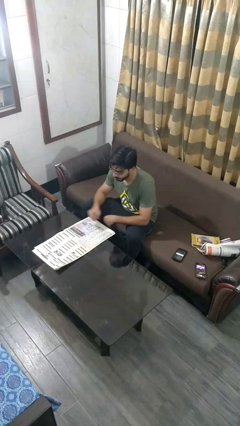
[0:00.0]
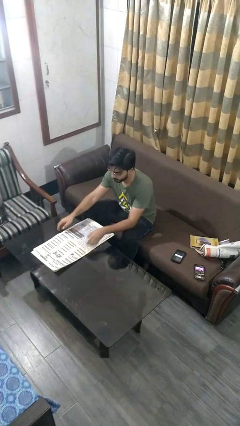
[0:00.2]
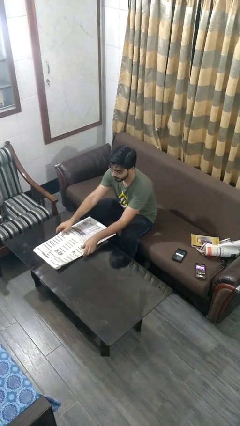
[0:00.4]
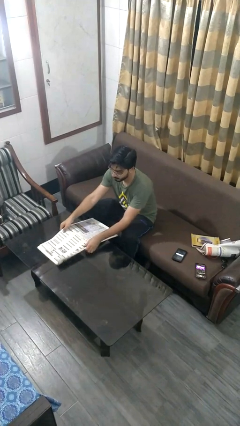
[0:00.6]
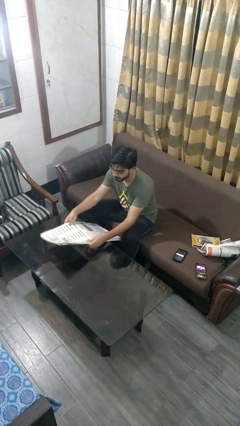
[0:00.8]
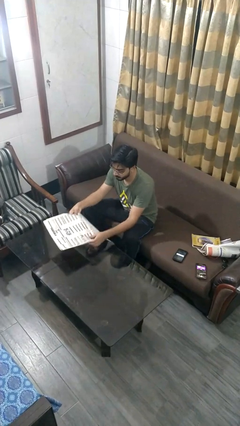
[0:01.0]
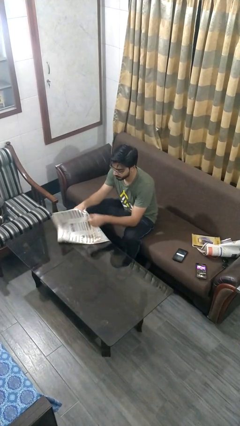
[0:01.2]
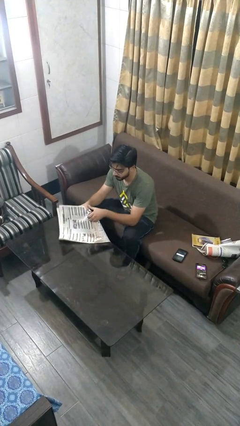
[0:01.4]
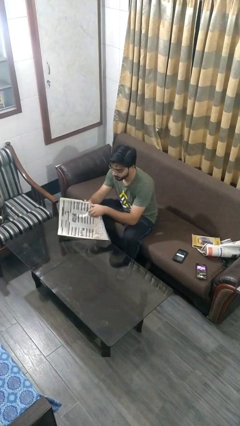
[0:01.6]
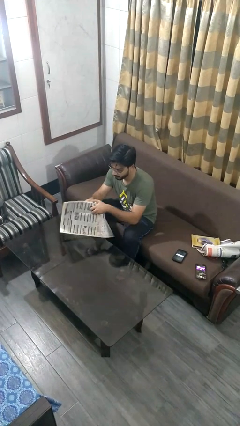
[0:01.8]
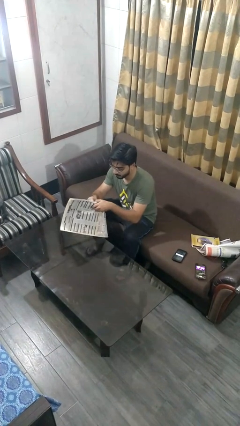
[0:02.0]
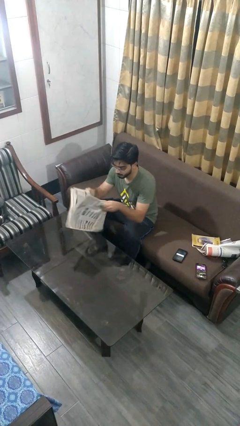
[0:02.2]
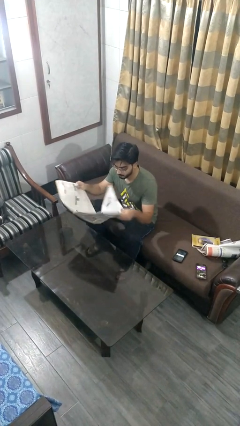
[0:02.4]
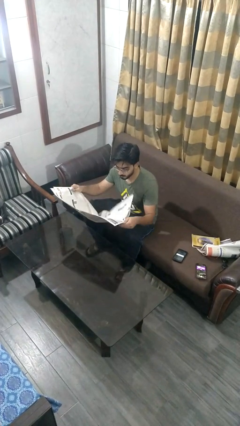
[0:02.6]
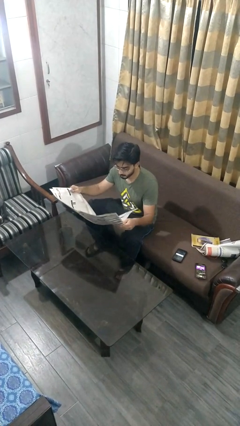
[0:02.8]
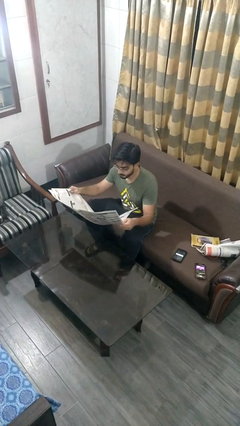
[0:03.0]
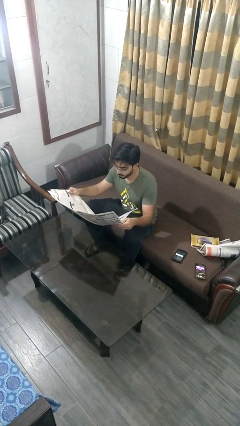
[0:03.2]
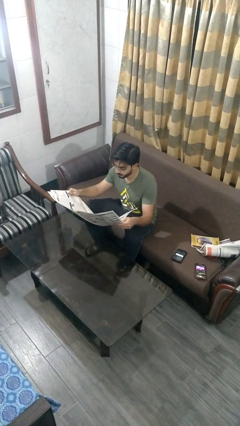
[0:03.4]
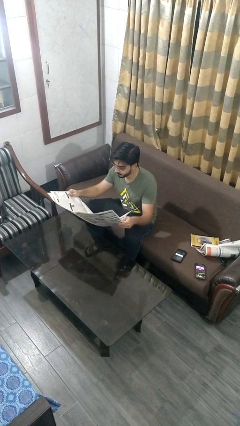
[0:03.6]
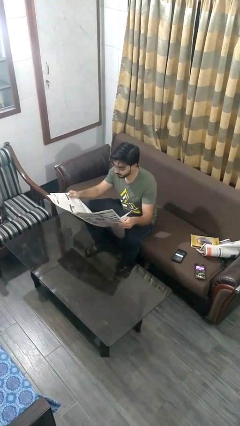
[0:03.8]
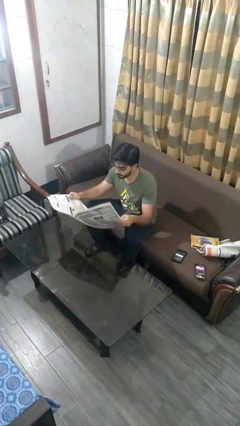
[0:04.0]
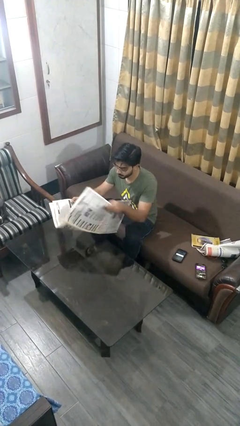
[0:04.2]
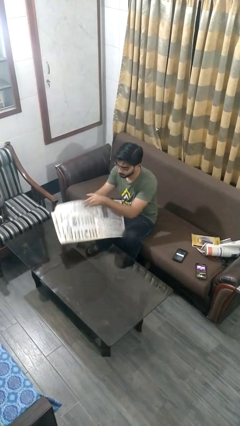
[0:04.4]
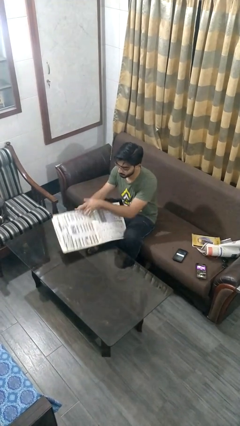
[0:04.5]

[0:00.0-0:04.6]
person reads newspaper

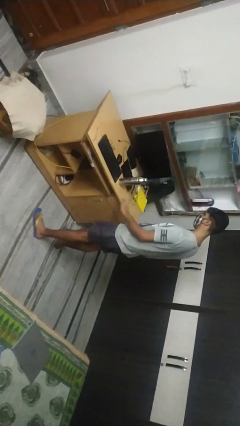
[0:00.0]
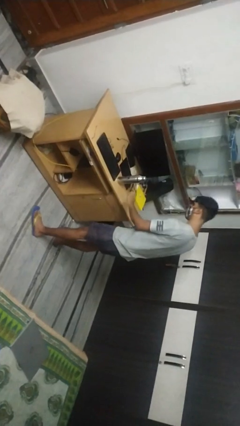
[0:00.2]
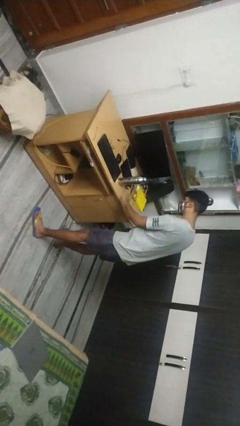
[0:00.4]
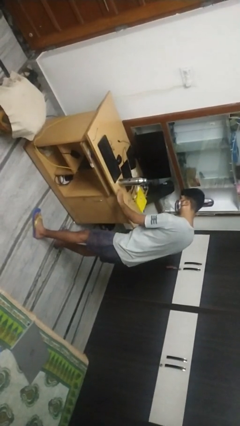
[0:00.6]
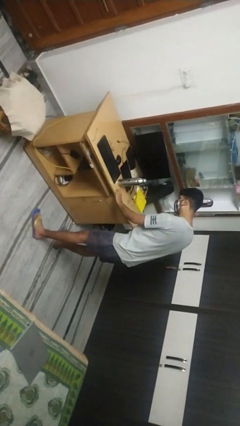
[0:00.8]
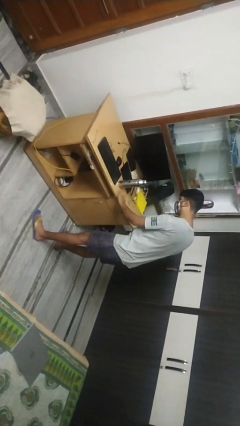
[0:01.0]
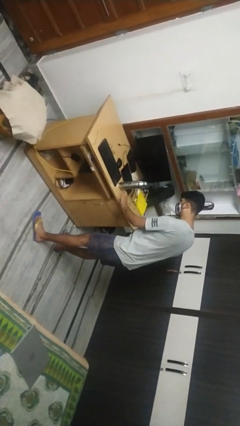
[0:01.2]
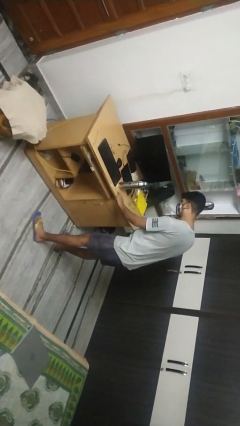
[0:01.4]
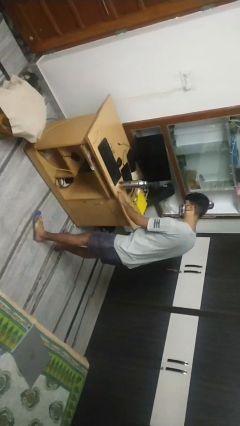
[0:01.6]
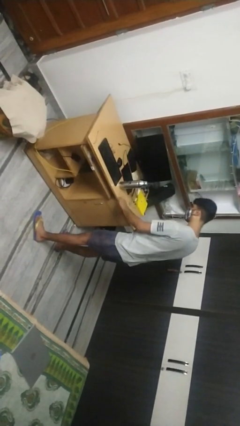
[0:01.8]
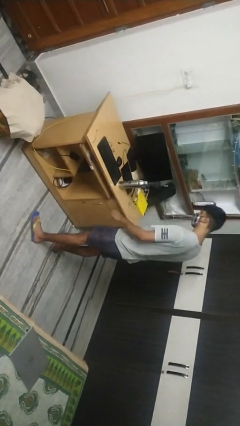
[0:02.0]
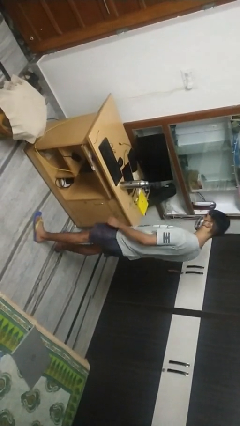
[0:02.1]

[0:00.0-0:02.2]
person taps object with finger

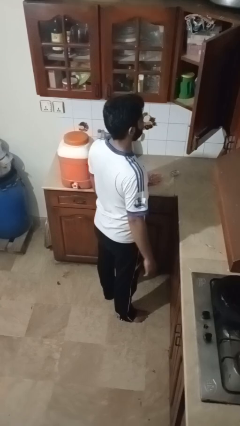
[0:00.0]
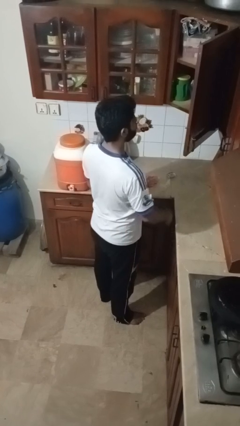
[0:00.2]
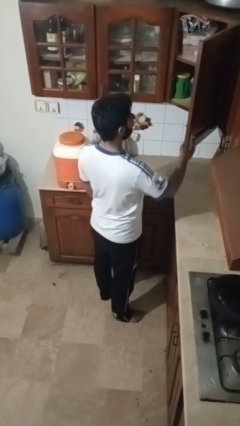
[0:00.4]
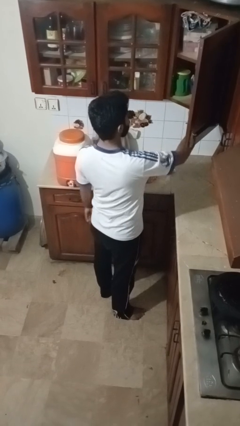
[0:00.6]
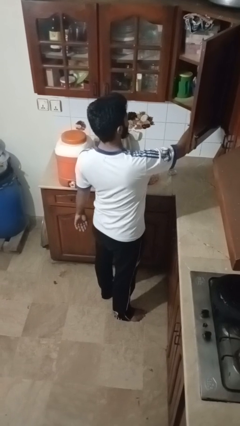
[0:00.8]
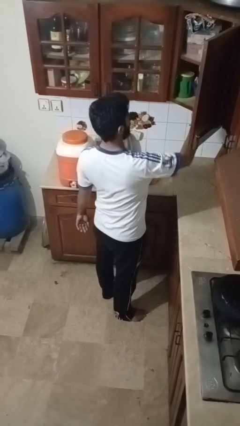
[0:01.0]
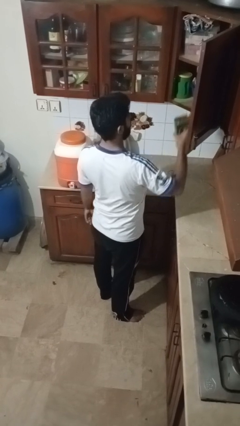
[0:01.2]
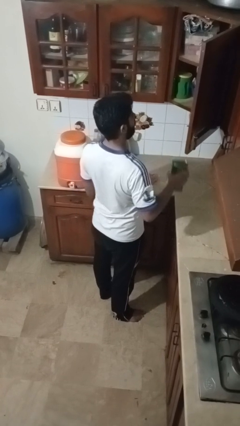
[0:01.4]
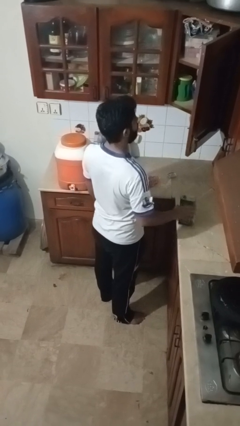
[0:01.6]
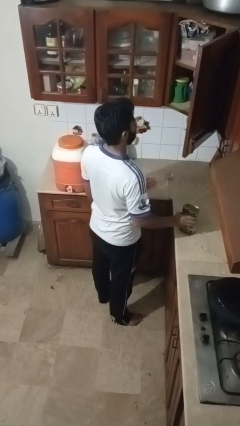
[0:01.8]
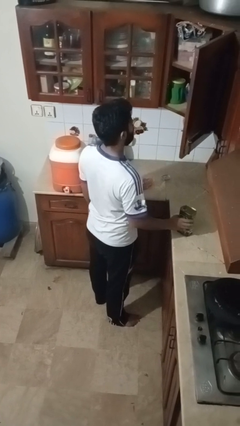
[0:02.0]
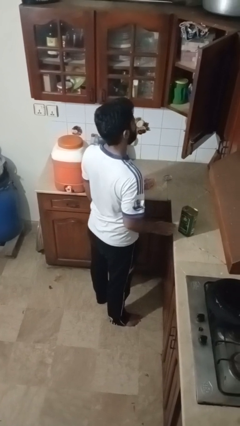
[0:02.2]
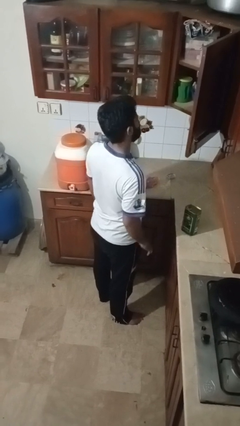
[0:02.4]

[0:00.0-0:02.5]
person takes object from cabinet

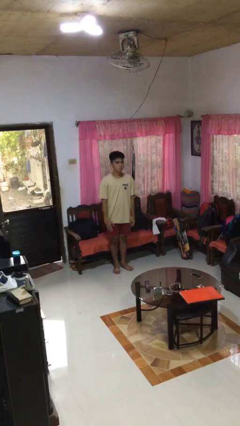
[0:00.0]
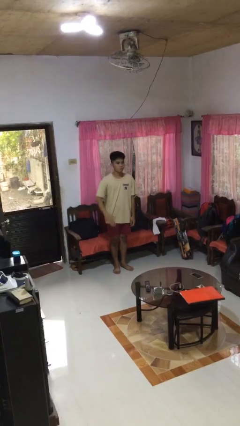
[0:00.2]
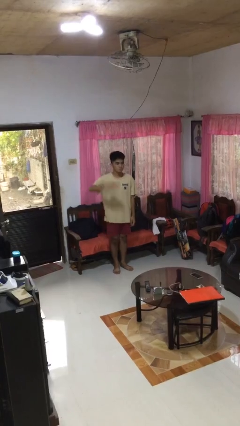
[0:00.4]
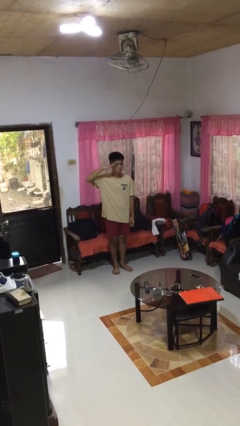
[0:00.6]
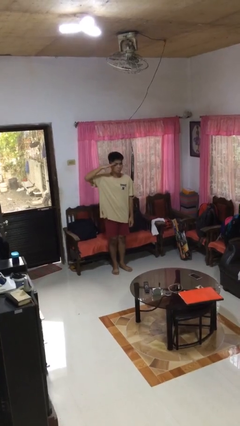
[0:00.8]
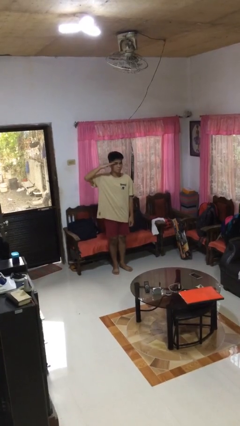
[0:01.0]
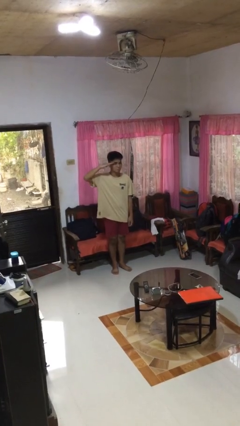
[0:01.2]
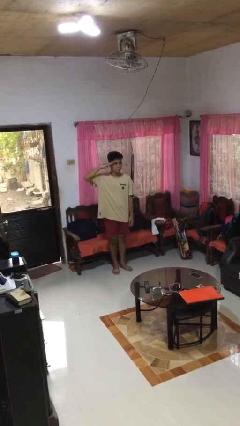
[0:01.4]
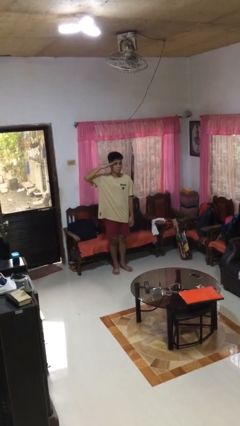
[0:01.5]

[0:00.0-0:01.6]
person salutes

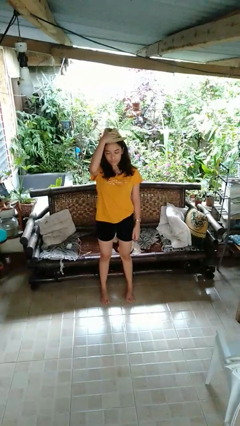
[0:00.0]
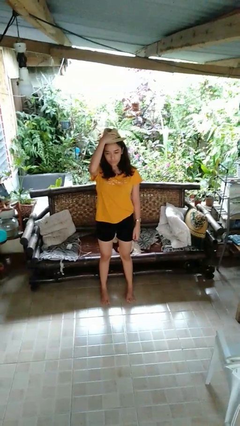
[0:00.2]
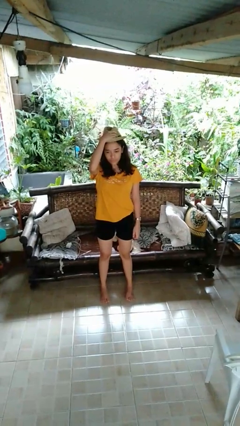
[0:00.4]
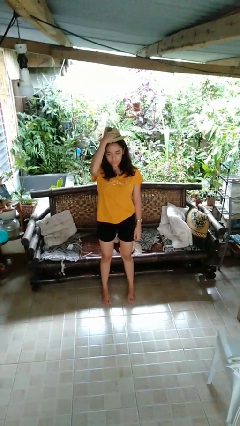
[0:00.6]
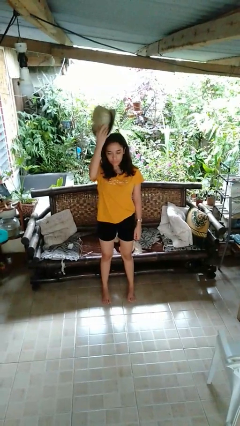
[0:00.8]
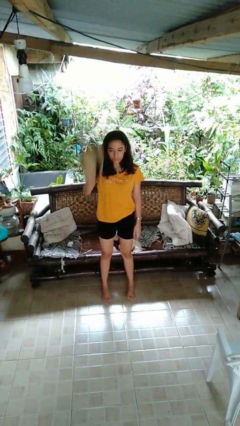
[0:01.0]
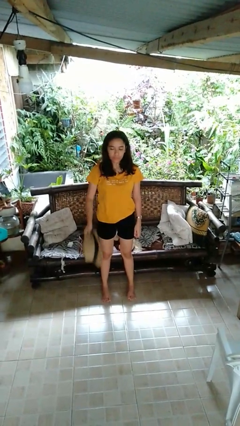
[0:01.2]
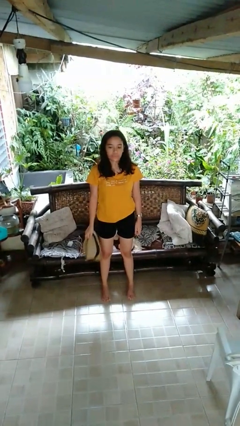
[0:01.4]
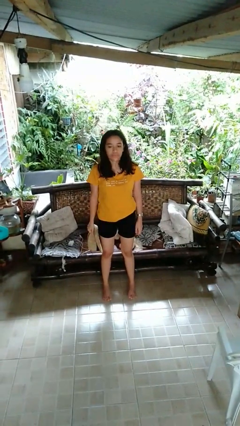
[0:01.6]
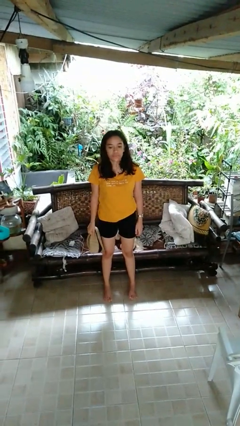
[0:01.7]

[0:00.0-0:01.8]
person takes off hat

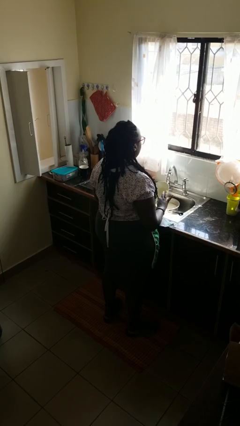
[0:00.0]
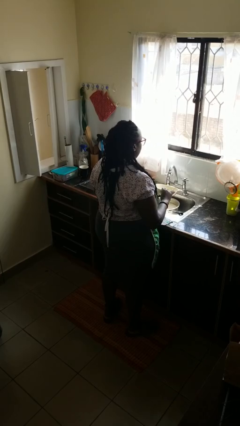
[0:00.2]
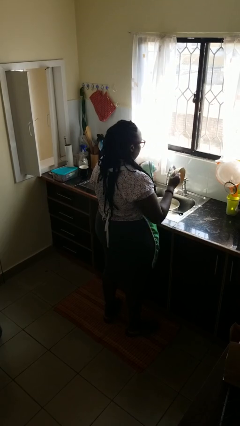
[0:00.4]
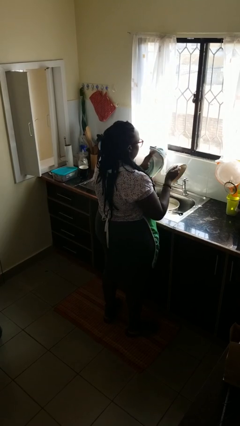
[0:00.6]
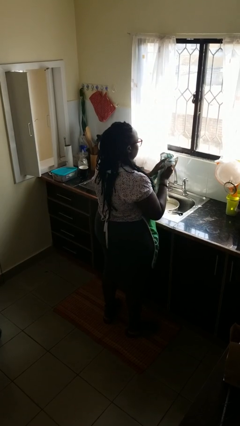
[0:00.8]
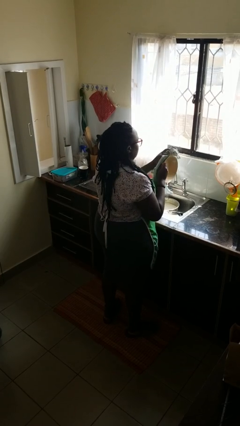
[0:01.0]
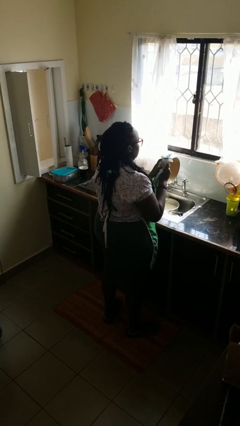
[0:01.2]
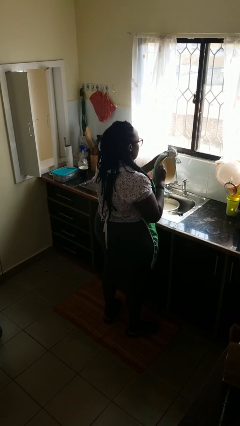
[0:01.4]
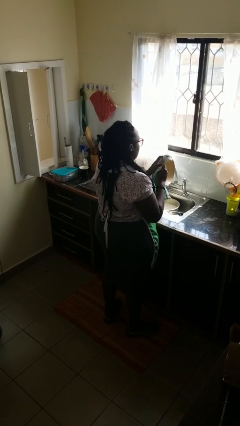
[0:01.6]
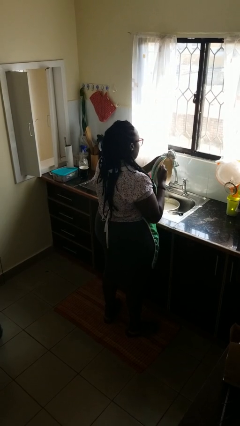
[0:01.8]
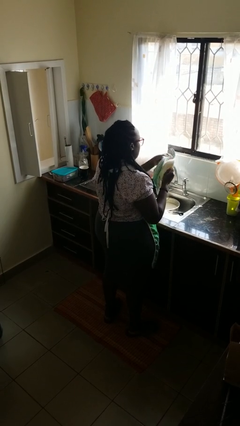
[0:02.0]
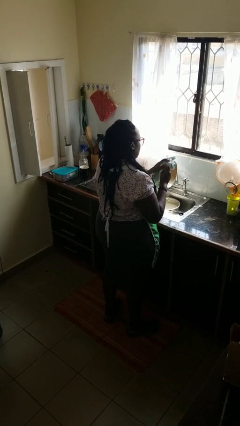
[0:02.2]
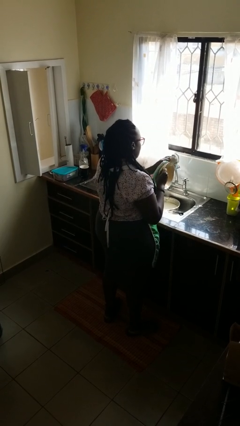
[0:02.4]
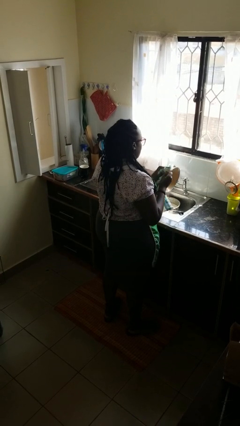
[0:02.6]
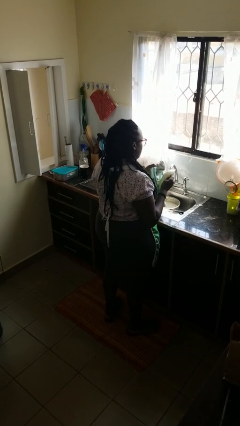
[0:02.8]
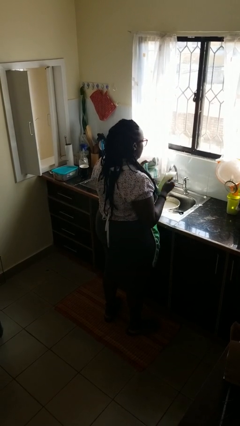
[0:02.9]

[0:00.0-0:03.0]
person dries dish

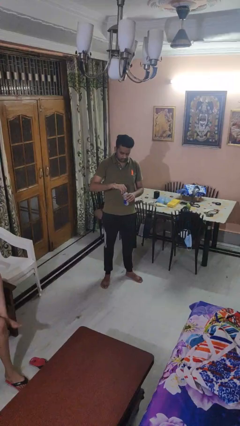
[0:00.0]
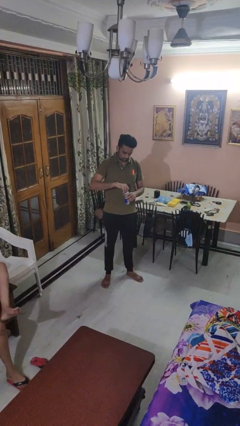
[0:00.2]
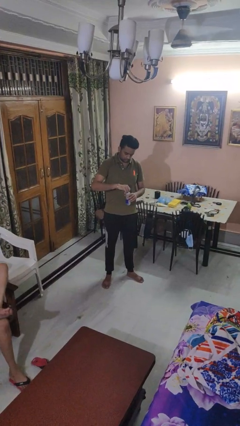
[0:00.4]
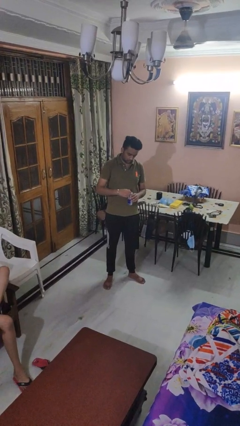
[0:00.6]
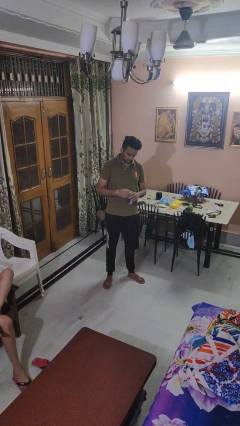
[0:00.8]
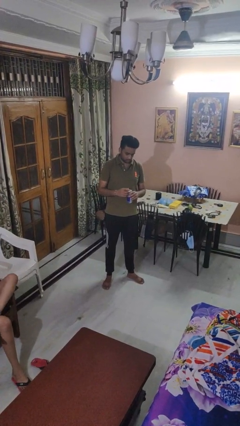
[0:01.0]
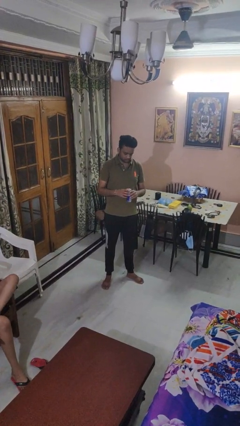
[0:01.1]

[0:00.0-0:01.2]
person opens beverage can
